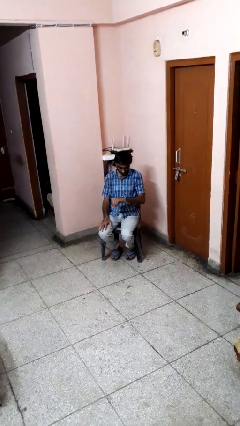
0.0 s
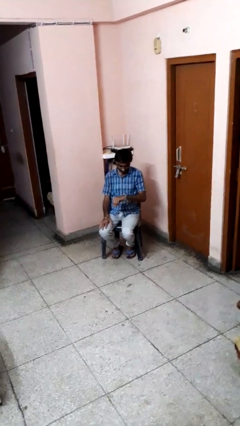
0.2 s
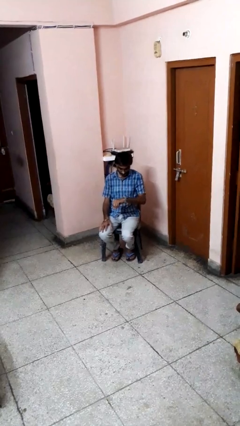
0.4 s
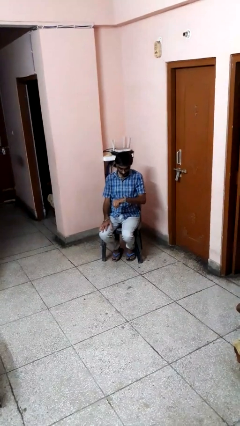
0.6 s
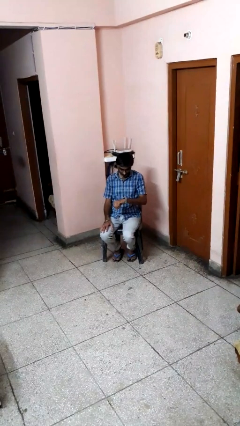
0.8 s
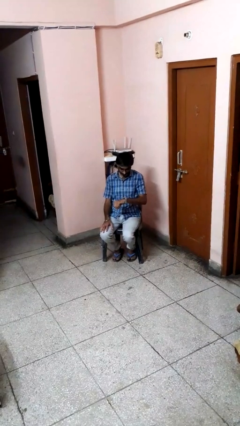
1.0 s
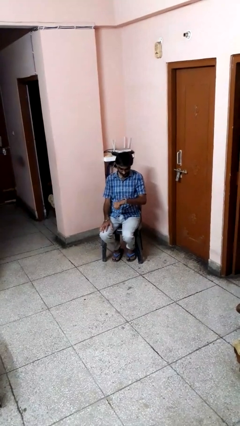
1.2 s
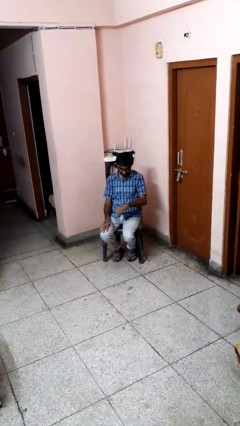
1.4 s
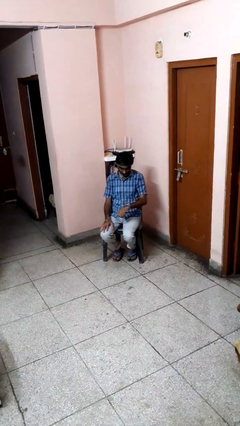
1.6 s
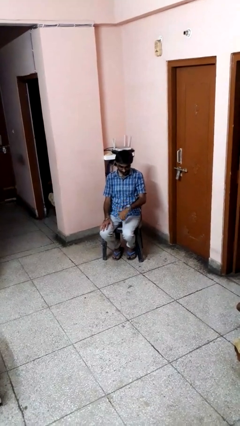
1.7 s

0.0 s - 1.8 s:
person looks at wristwatch

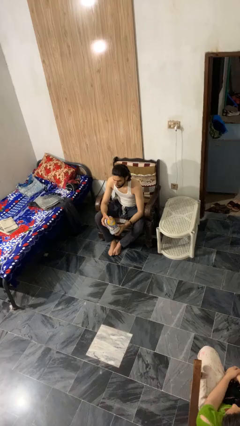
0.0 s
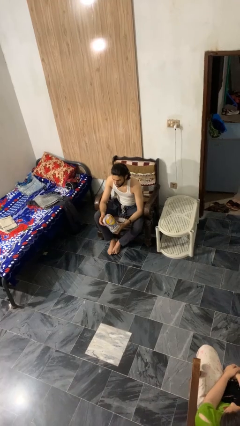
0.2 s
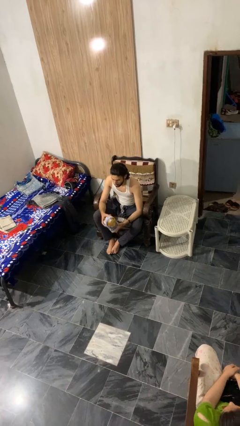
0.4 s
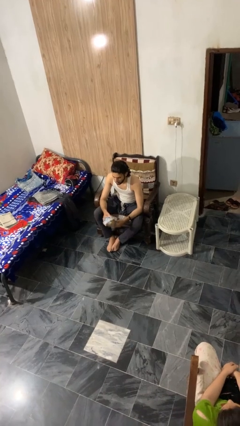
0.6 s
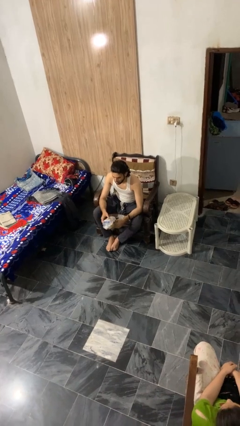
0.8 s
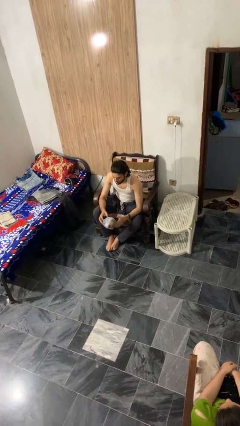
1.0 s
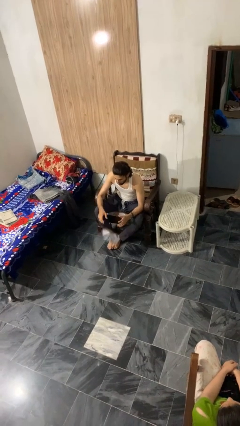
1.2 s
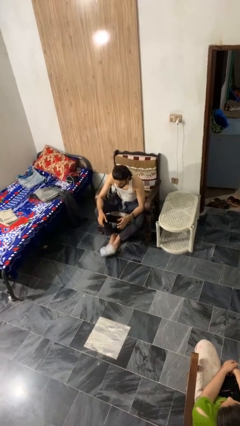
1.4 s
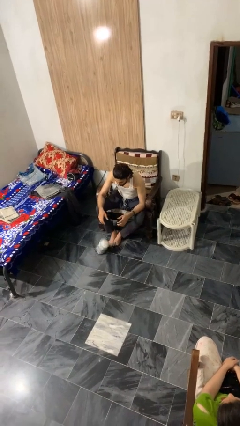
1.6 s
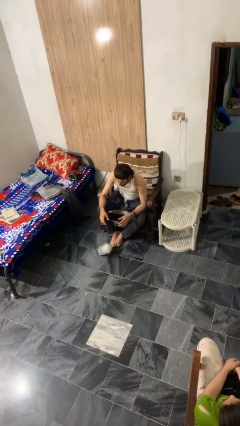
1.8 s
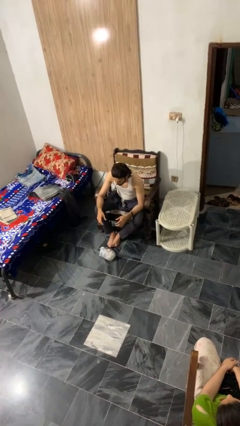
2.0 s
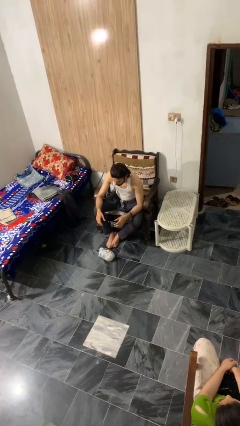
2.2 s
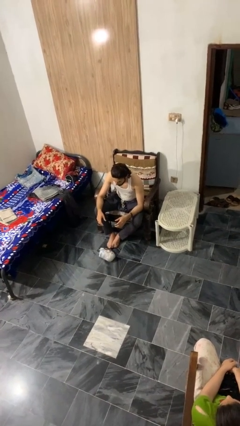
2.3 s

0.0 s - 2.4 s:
person drops object

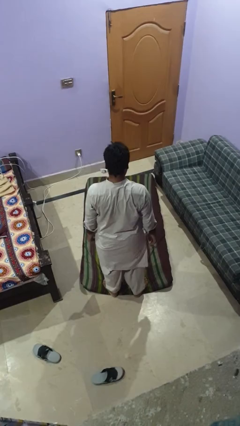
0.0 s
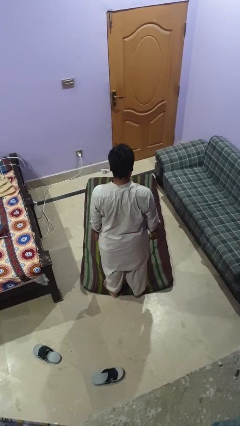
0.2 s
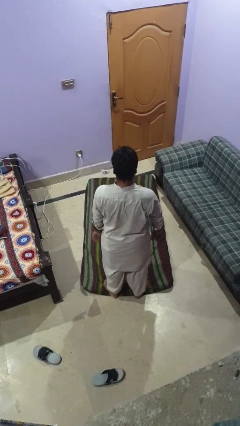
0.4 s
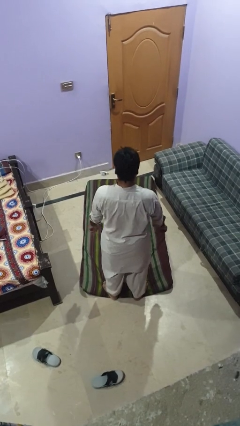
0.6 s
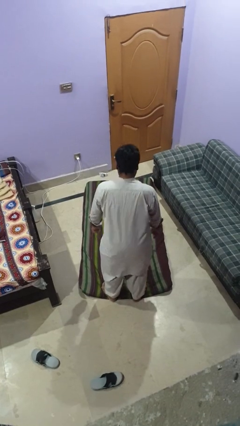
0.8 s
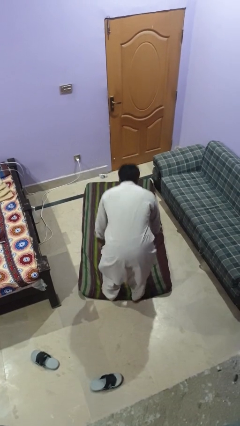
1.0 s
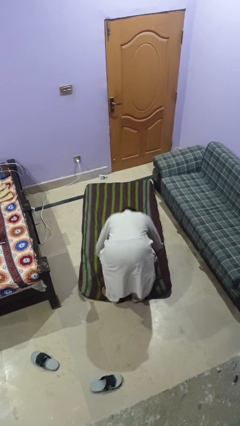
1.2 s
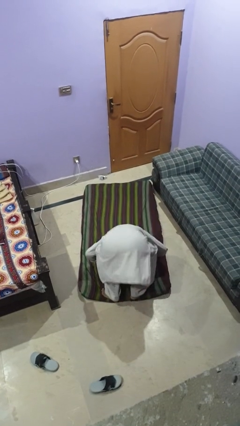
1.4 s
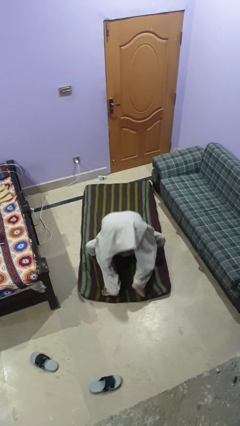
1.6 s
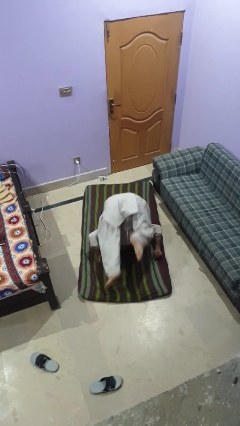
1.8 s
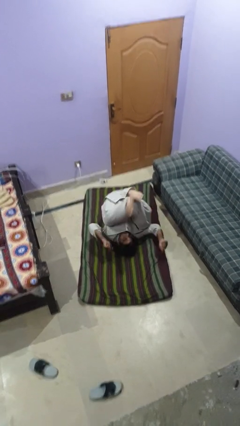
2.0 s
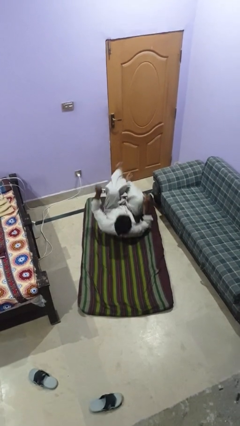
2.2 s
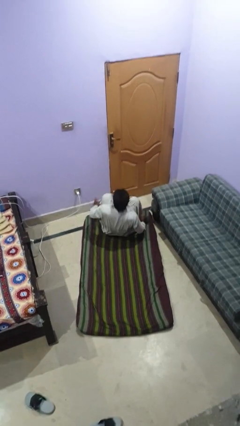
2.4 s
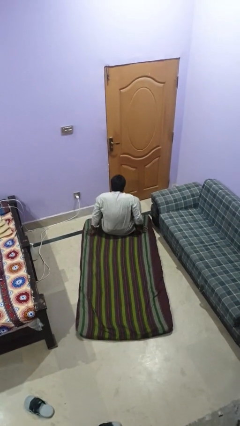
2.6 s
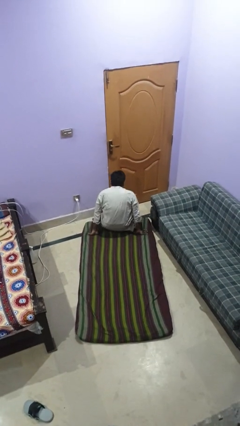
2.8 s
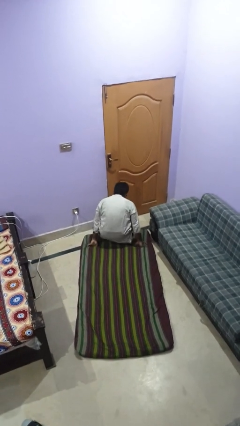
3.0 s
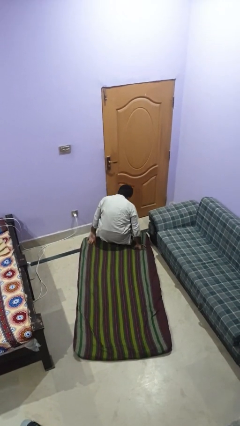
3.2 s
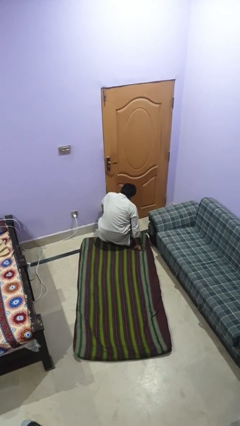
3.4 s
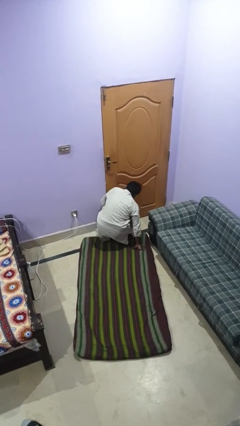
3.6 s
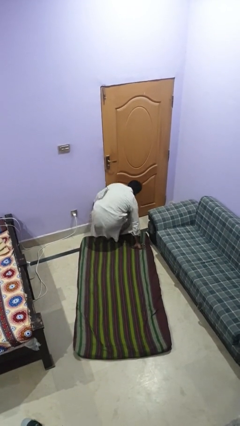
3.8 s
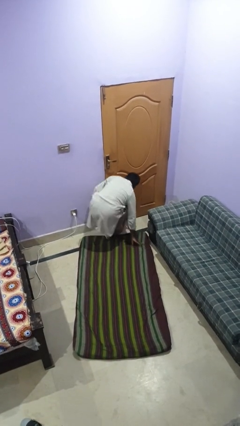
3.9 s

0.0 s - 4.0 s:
person somersaults

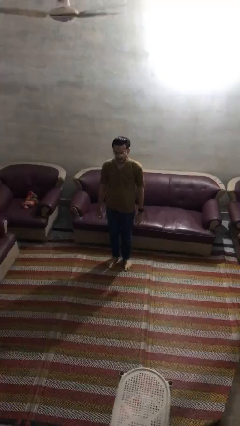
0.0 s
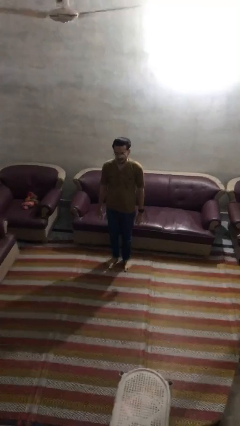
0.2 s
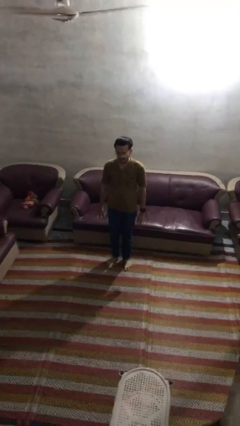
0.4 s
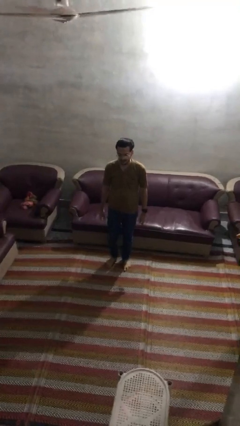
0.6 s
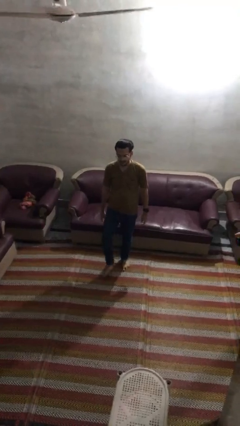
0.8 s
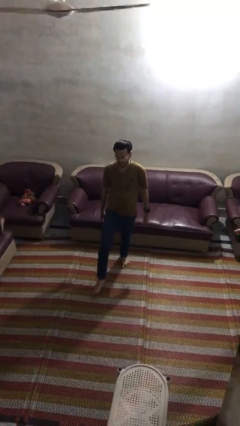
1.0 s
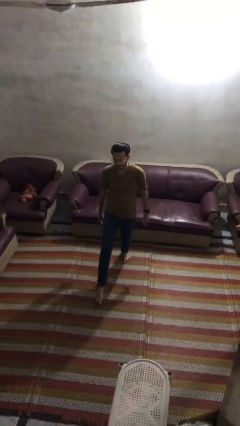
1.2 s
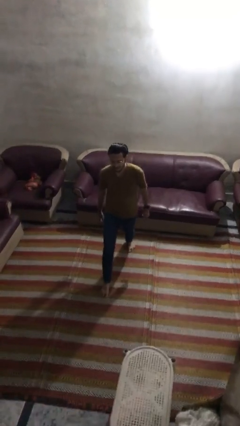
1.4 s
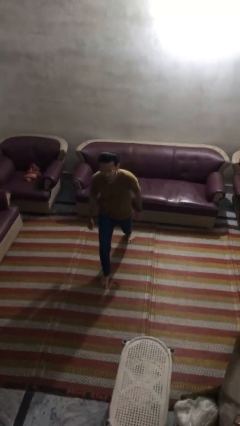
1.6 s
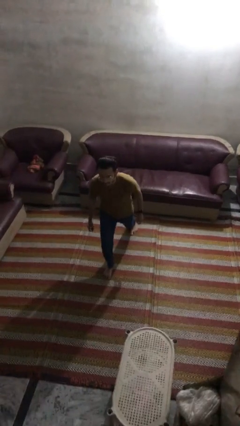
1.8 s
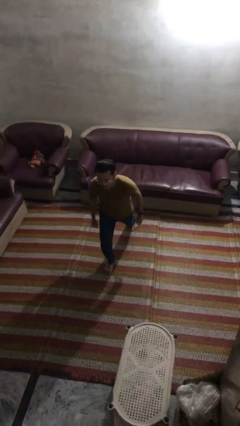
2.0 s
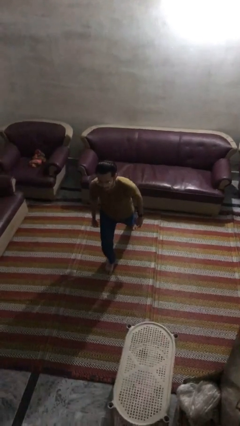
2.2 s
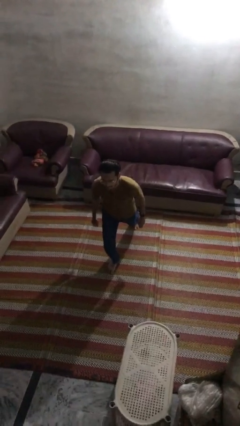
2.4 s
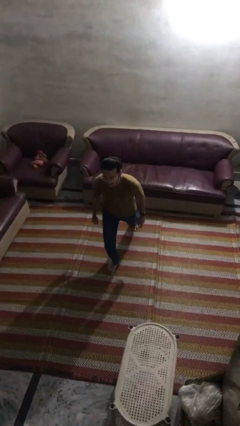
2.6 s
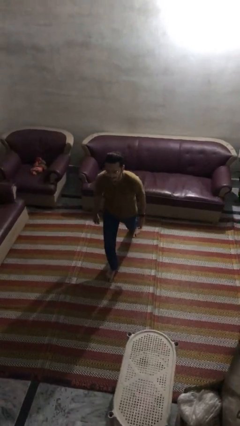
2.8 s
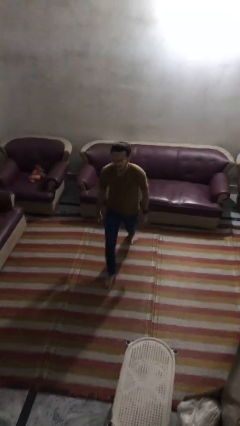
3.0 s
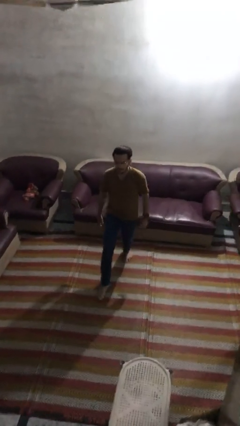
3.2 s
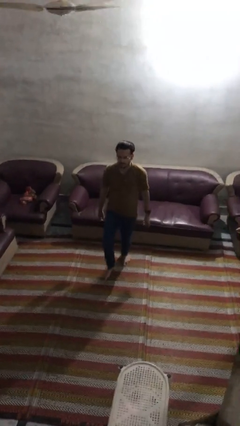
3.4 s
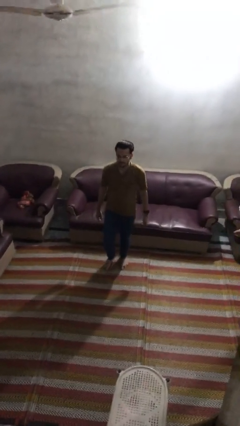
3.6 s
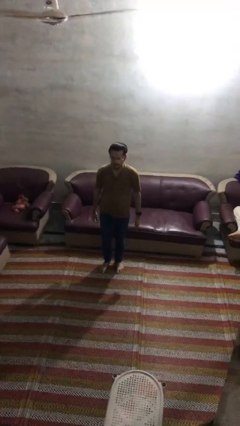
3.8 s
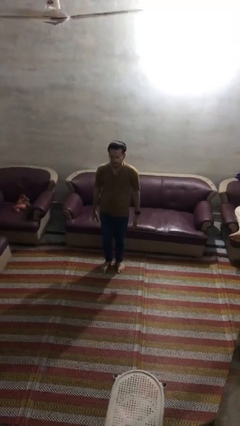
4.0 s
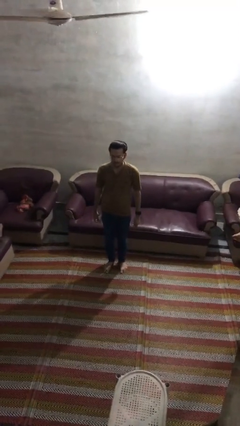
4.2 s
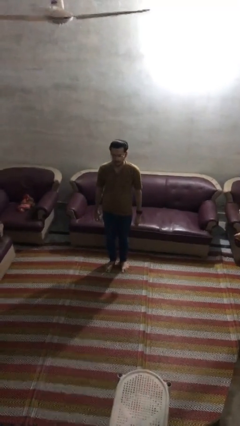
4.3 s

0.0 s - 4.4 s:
person exercises with lunges

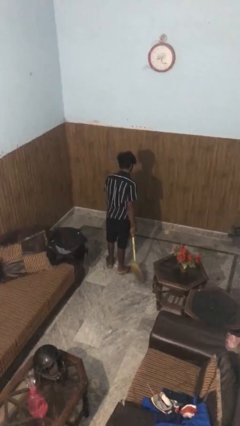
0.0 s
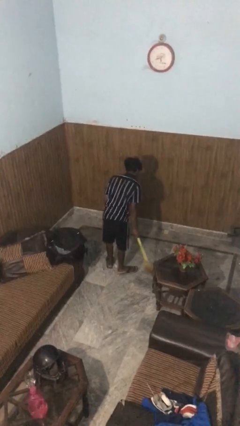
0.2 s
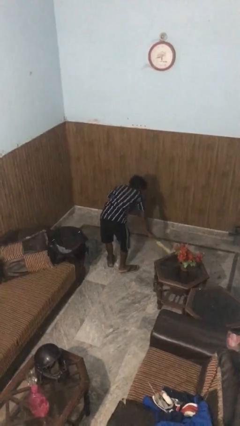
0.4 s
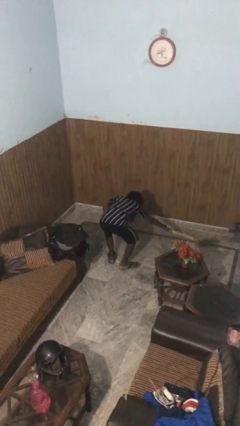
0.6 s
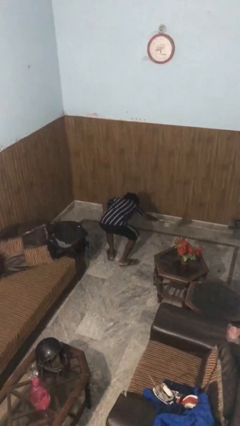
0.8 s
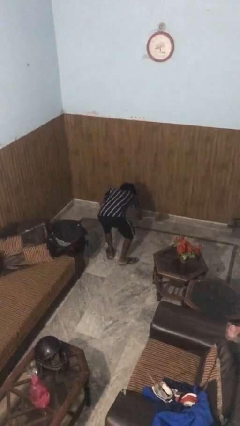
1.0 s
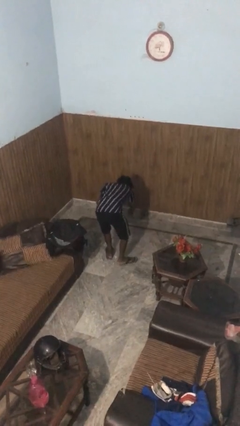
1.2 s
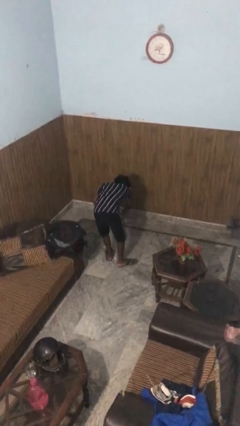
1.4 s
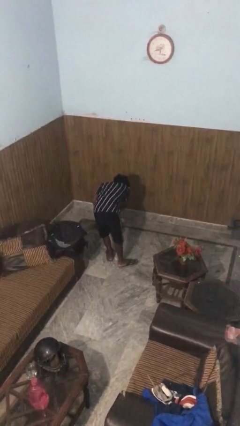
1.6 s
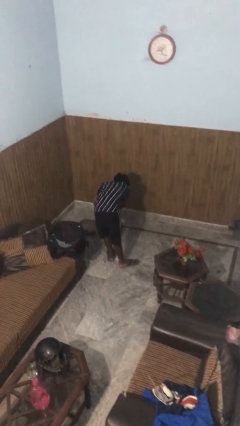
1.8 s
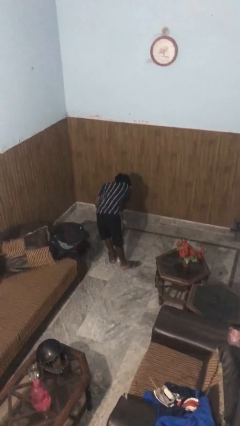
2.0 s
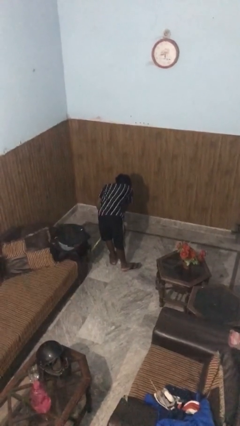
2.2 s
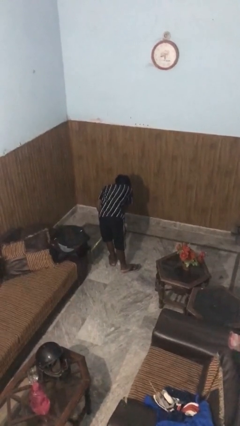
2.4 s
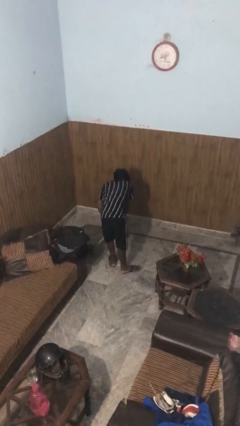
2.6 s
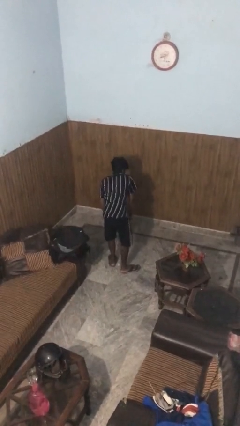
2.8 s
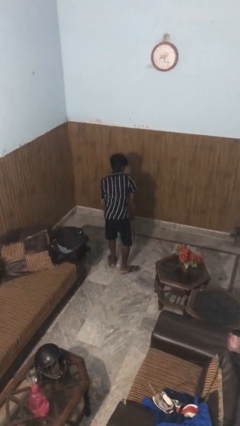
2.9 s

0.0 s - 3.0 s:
person sweeps floor

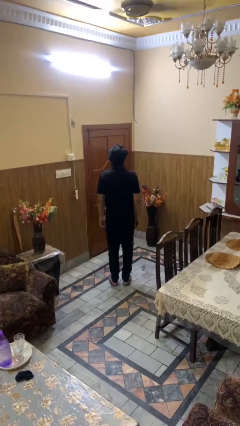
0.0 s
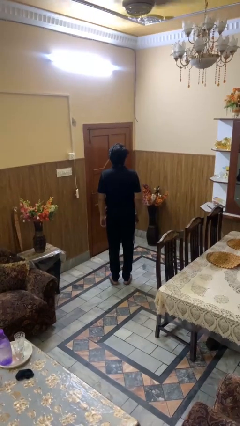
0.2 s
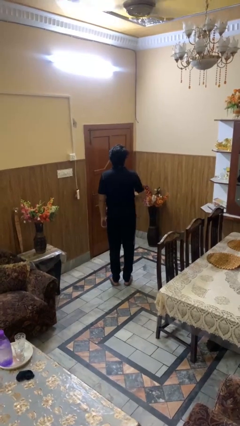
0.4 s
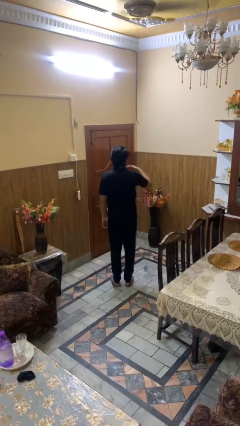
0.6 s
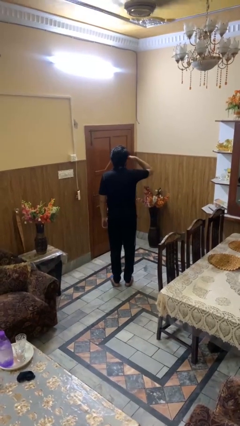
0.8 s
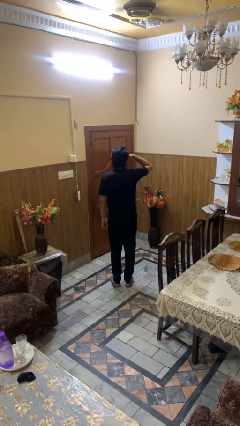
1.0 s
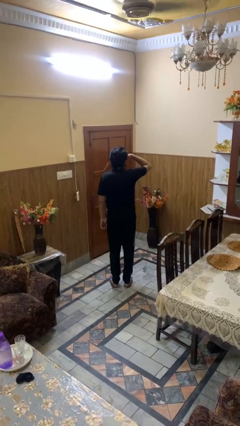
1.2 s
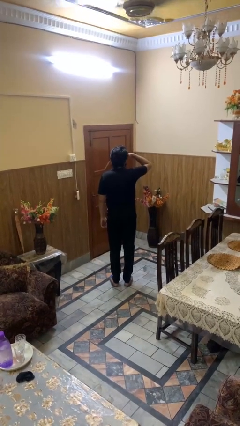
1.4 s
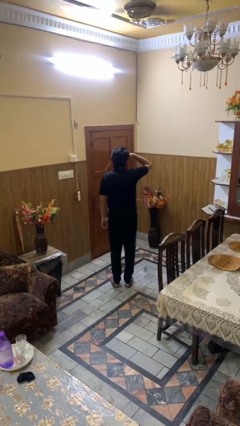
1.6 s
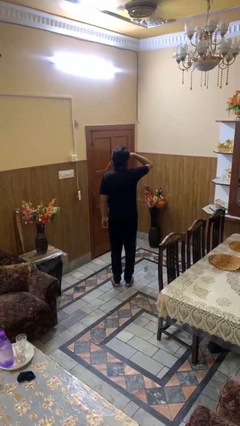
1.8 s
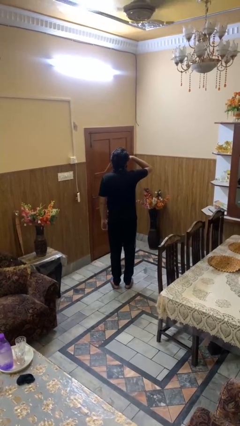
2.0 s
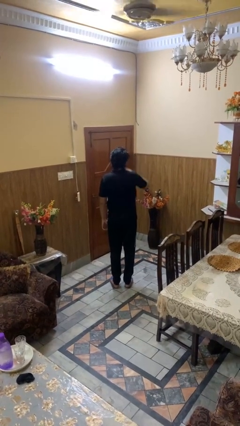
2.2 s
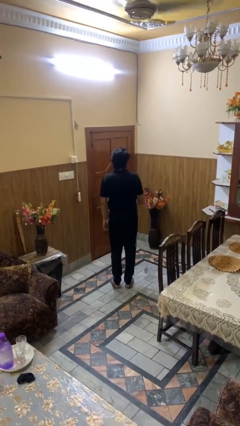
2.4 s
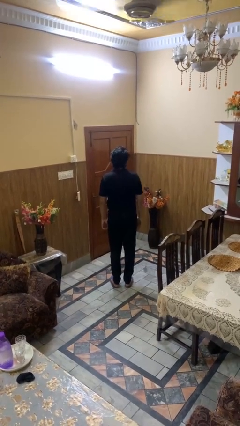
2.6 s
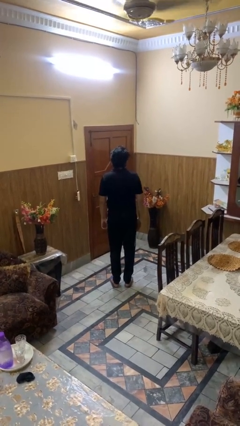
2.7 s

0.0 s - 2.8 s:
person shades eyes
